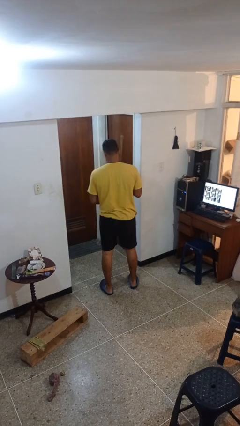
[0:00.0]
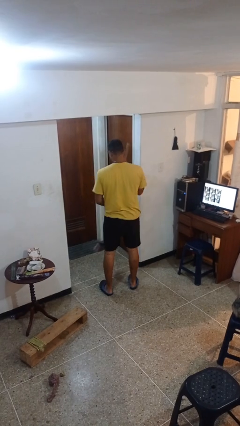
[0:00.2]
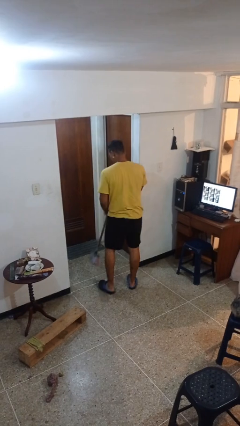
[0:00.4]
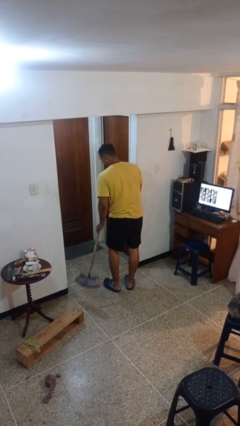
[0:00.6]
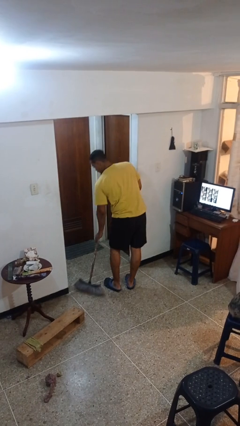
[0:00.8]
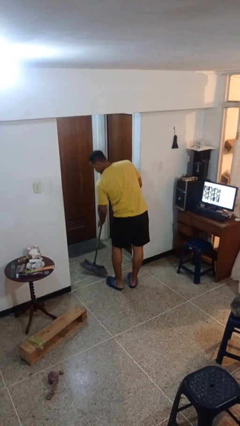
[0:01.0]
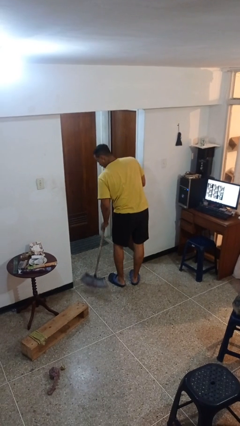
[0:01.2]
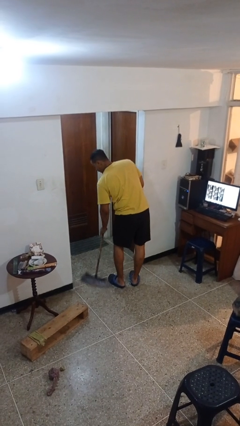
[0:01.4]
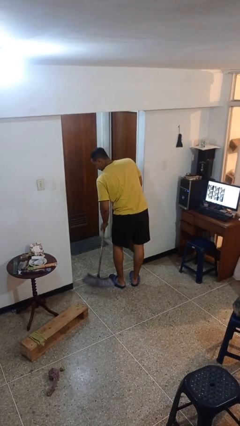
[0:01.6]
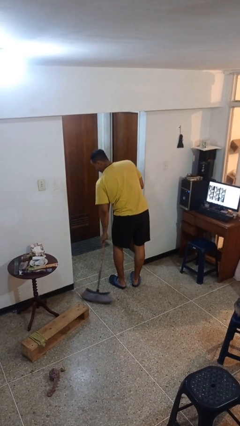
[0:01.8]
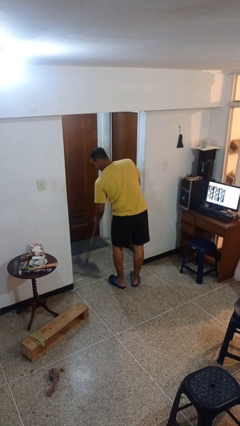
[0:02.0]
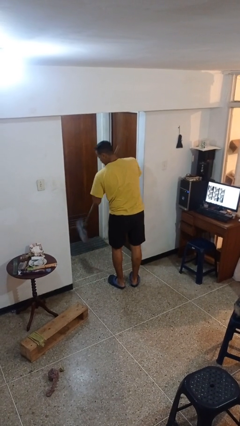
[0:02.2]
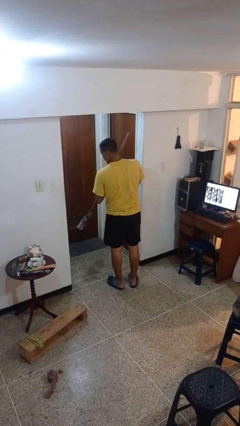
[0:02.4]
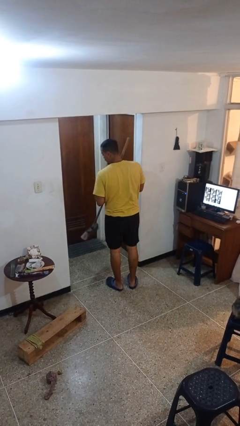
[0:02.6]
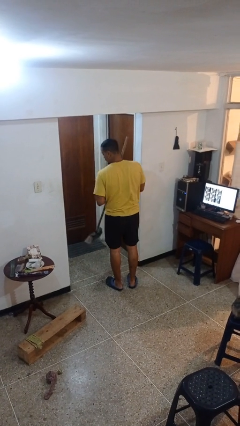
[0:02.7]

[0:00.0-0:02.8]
person sweeps floor

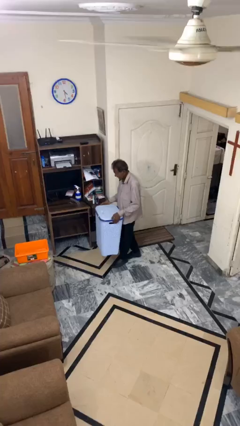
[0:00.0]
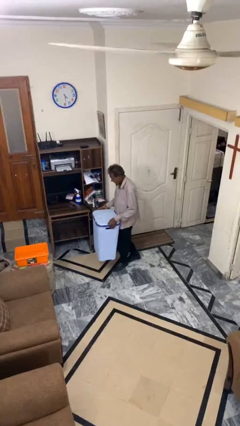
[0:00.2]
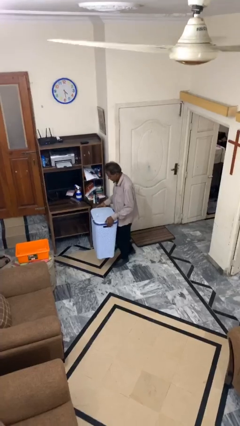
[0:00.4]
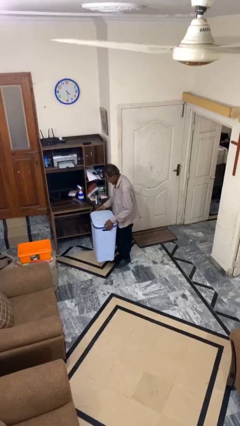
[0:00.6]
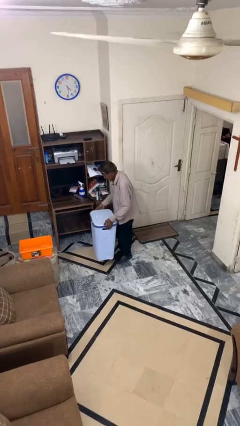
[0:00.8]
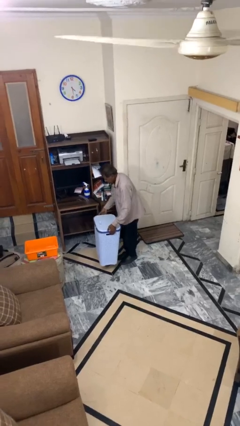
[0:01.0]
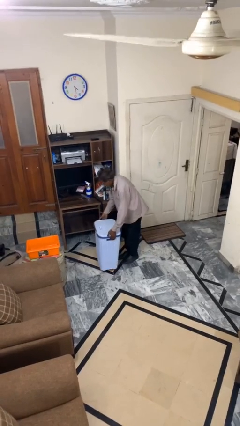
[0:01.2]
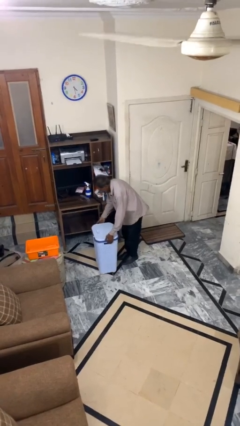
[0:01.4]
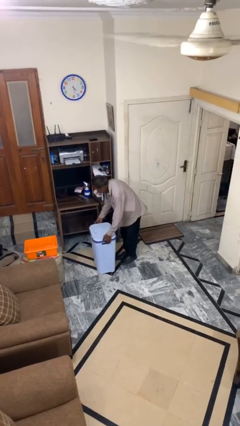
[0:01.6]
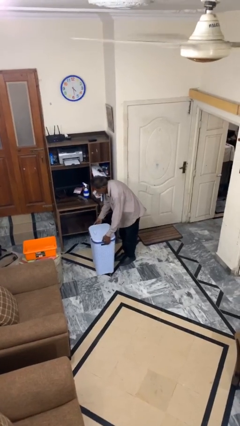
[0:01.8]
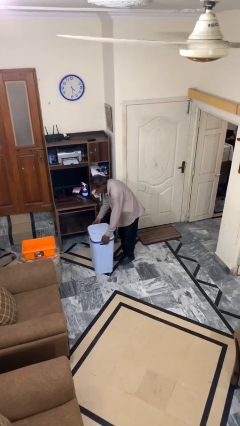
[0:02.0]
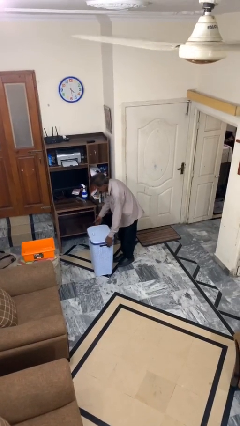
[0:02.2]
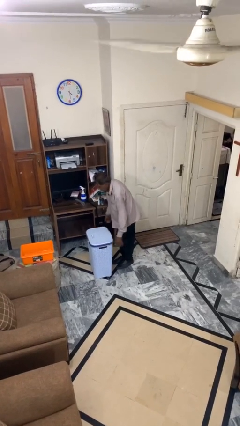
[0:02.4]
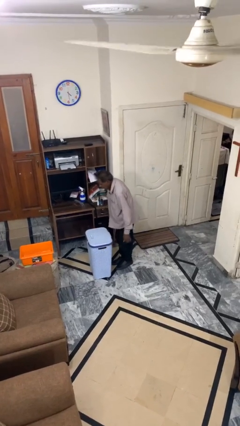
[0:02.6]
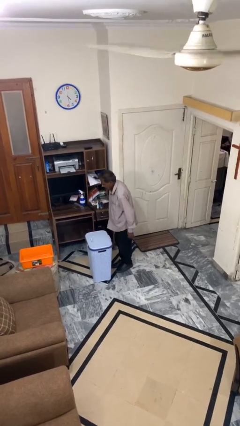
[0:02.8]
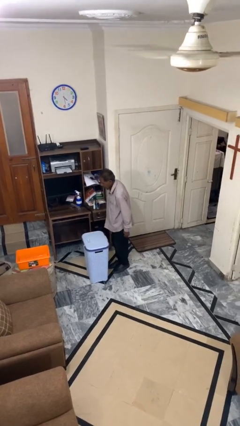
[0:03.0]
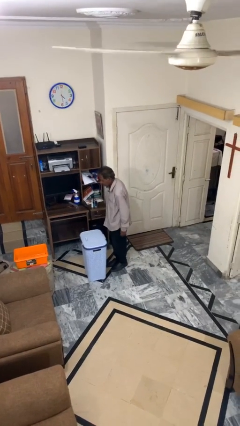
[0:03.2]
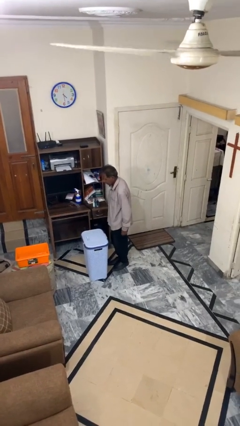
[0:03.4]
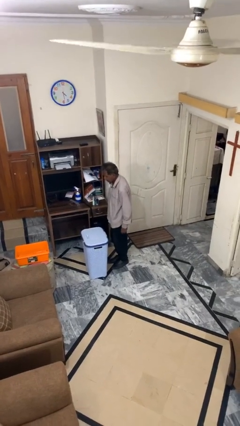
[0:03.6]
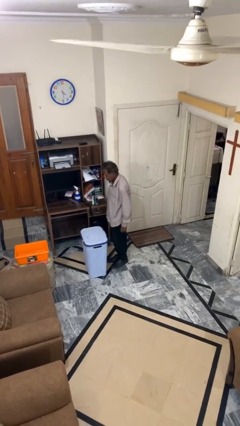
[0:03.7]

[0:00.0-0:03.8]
person puts down object on floor

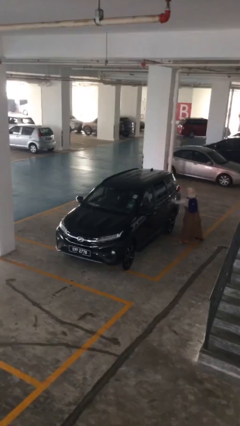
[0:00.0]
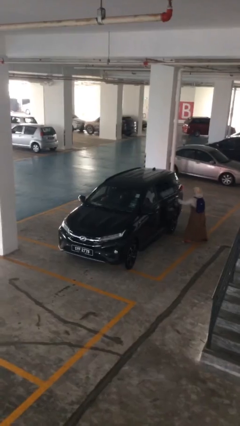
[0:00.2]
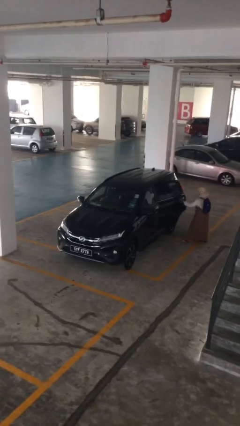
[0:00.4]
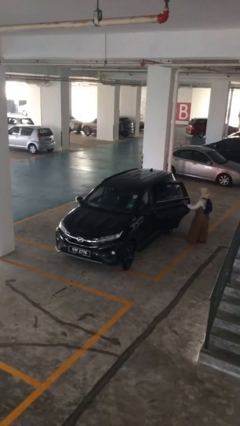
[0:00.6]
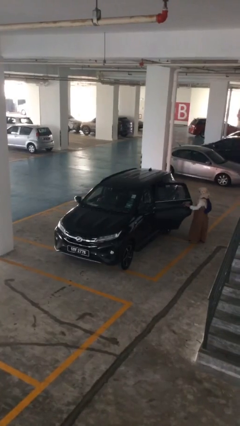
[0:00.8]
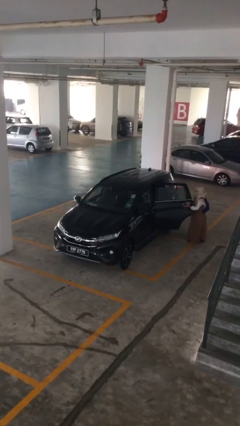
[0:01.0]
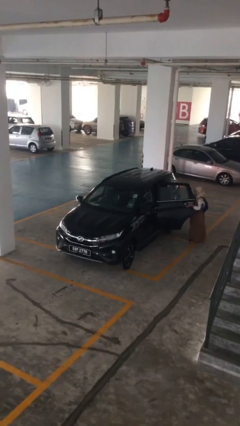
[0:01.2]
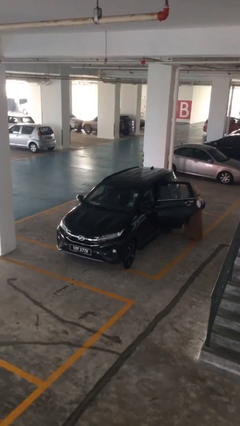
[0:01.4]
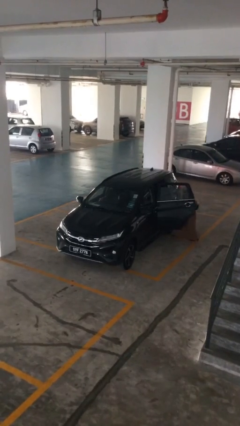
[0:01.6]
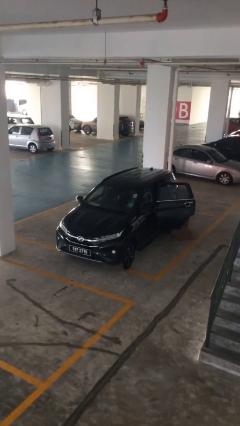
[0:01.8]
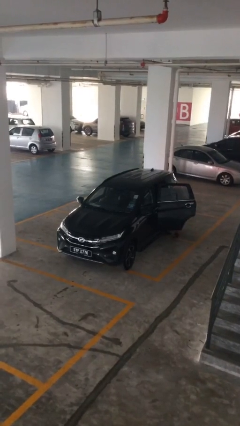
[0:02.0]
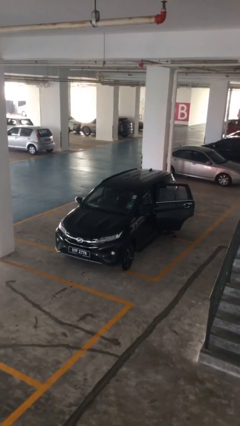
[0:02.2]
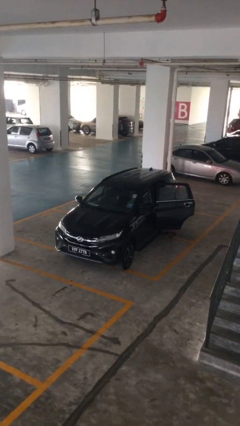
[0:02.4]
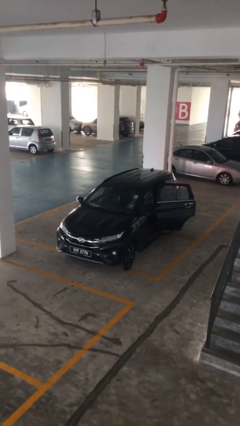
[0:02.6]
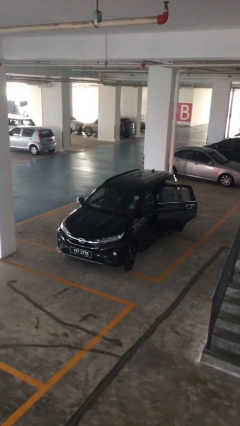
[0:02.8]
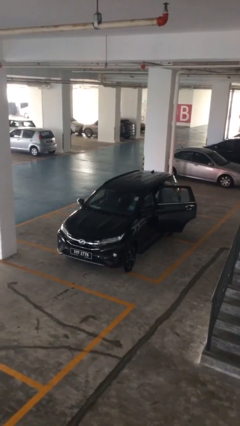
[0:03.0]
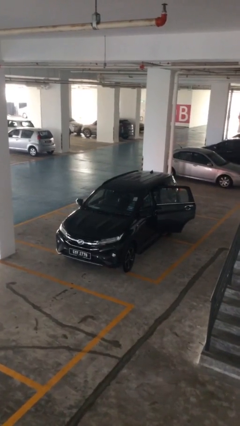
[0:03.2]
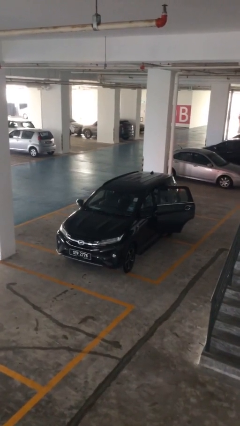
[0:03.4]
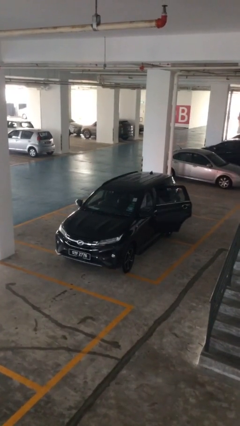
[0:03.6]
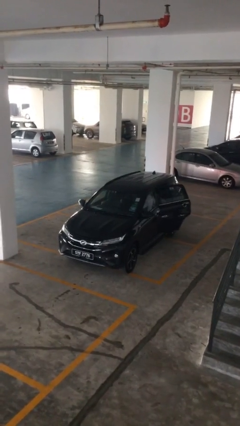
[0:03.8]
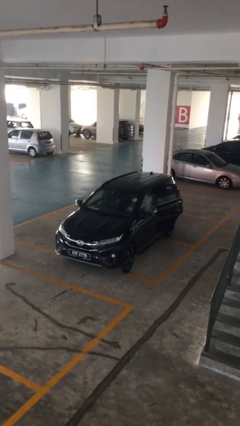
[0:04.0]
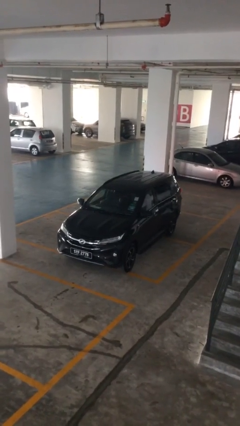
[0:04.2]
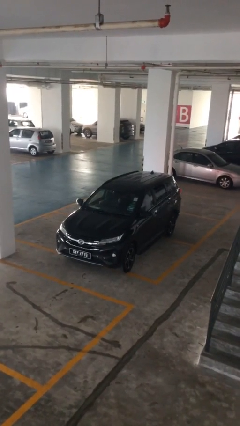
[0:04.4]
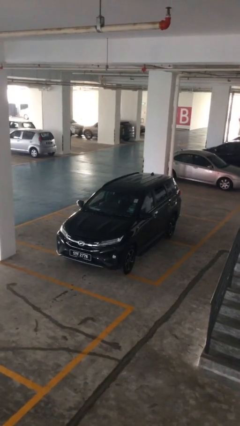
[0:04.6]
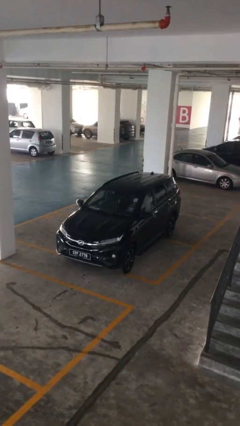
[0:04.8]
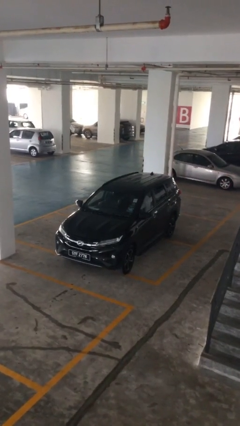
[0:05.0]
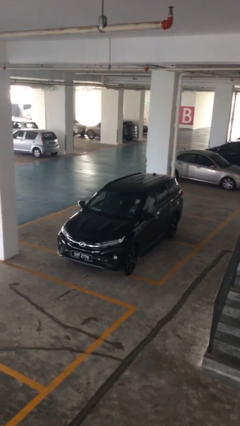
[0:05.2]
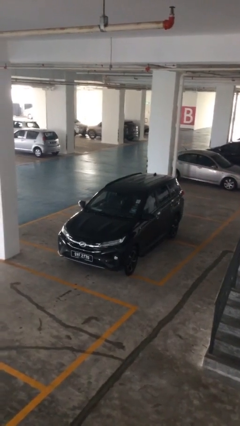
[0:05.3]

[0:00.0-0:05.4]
car picks up person

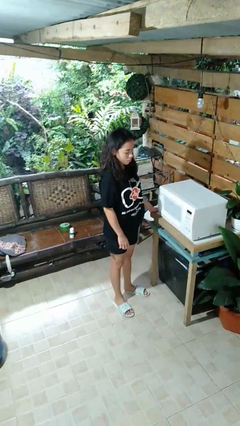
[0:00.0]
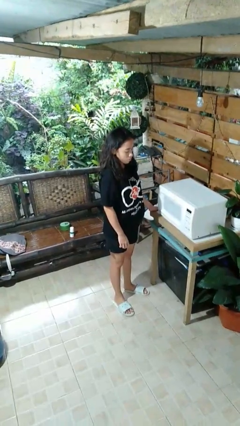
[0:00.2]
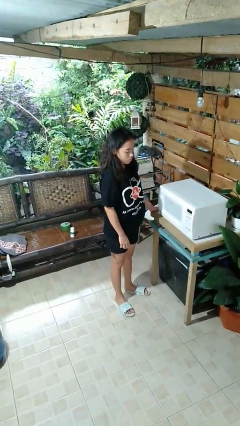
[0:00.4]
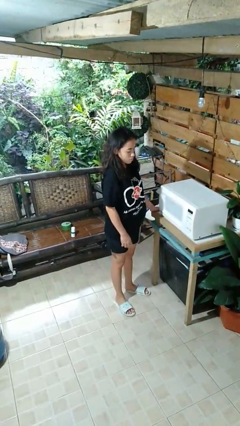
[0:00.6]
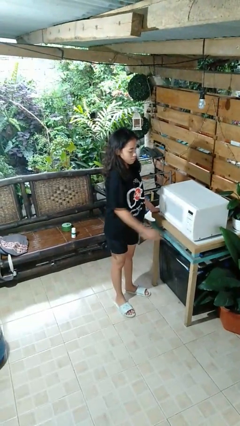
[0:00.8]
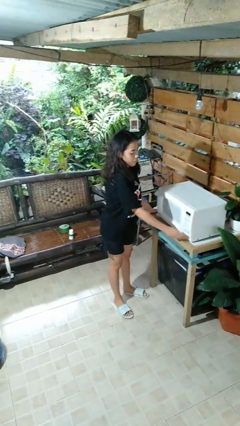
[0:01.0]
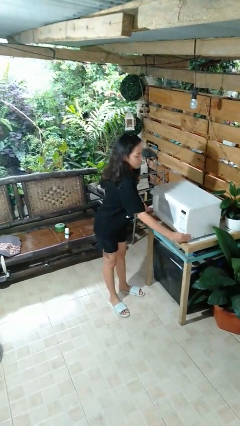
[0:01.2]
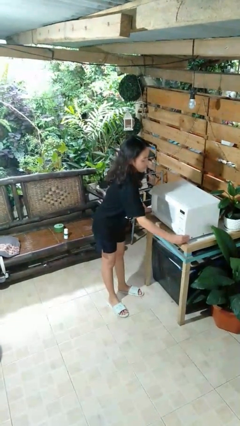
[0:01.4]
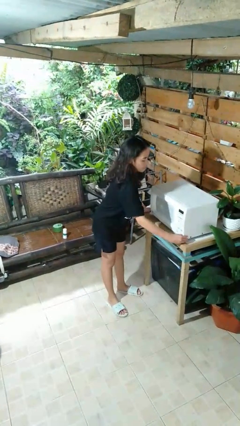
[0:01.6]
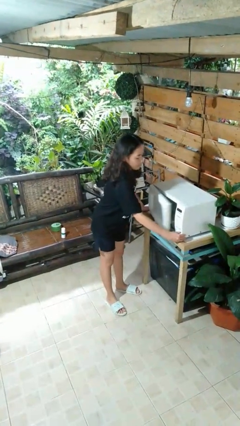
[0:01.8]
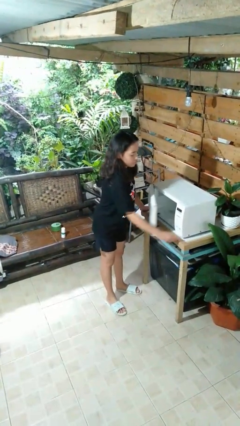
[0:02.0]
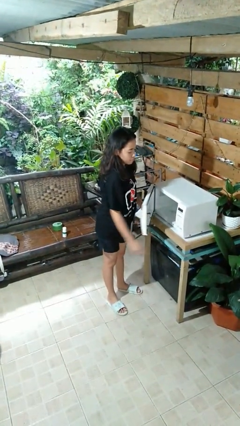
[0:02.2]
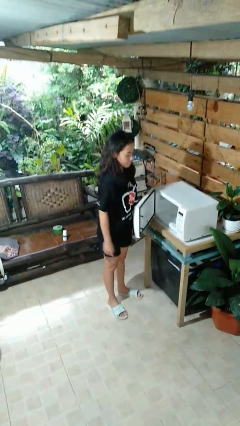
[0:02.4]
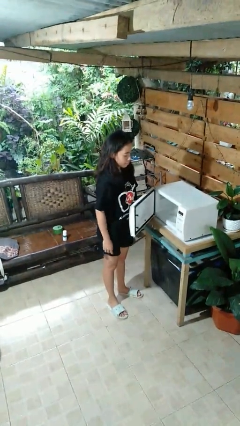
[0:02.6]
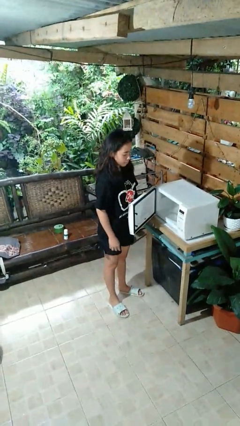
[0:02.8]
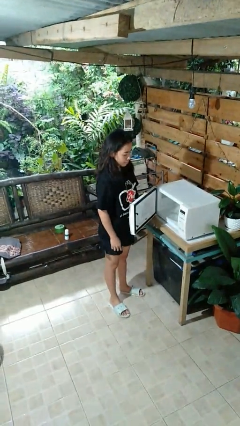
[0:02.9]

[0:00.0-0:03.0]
person opens microwave

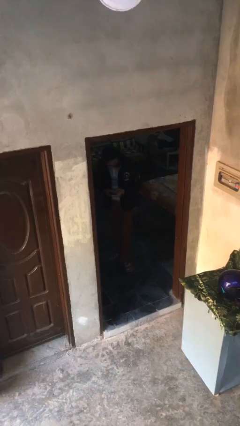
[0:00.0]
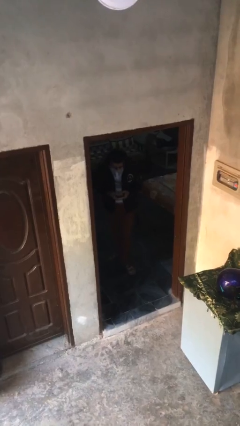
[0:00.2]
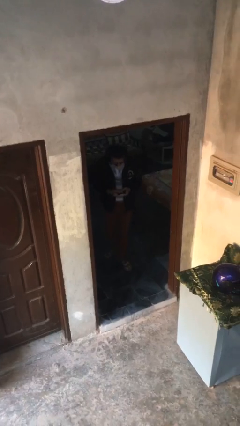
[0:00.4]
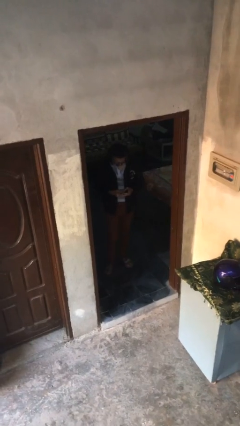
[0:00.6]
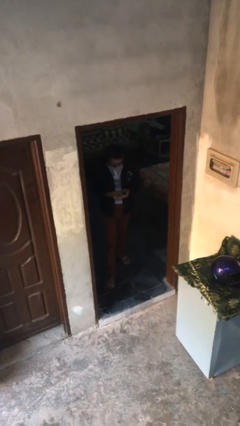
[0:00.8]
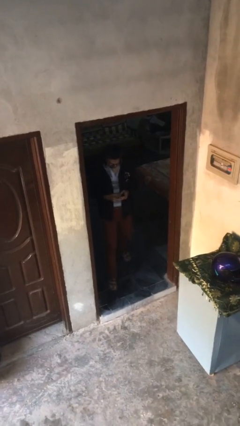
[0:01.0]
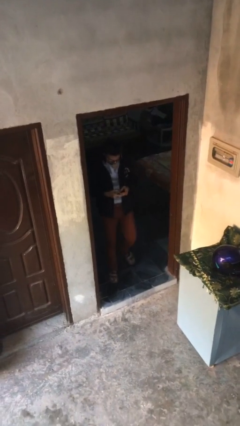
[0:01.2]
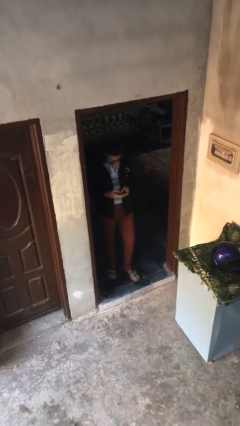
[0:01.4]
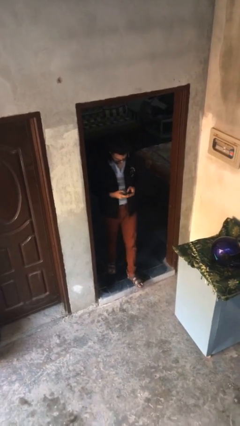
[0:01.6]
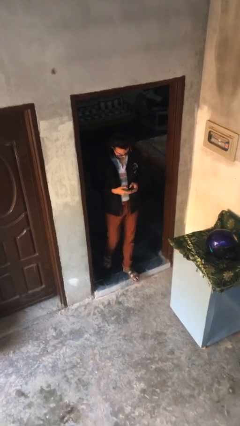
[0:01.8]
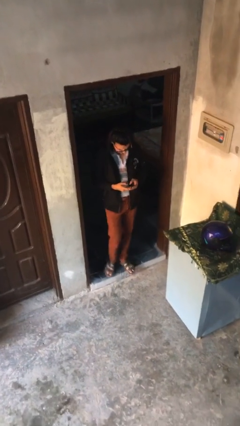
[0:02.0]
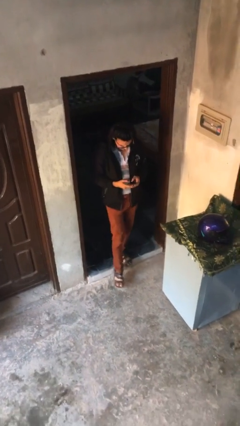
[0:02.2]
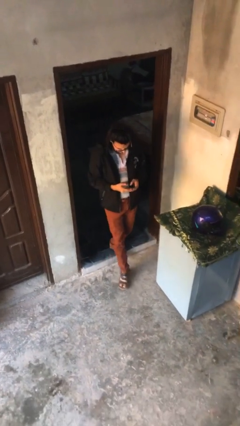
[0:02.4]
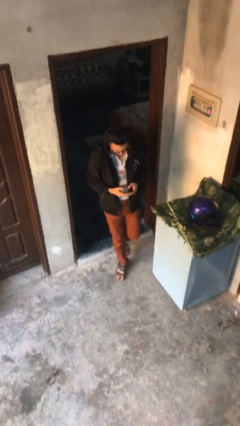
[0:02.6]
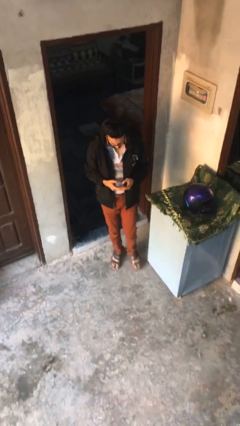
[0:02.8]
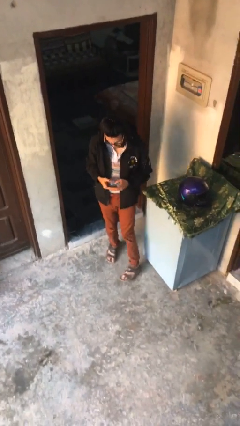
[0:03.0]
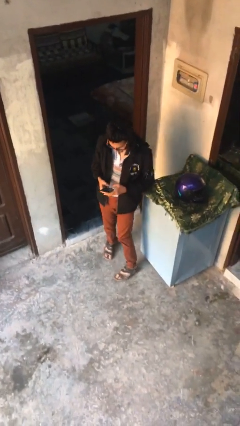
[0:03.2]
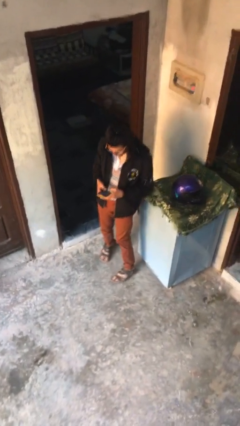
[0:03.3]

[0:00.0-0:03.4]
person exits scene through structure
